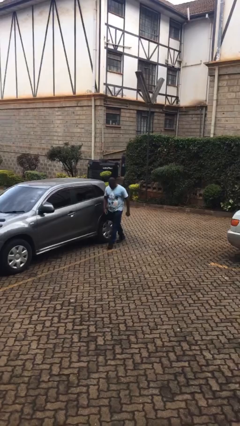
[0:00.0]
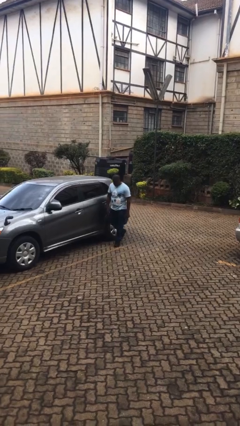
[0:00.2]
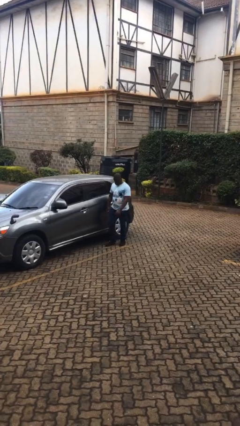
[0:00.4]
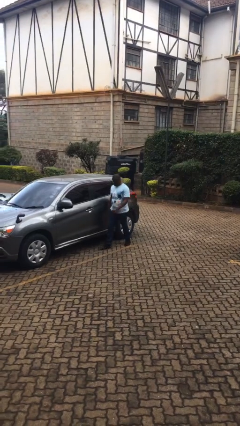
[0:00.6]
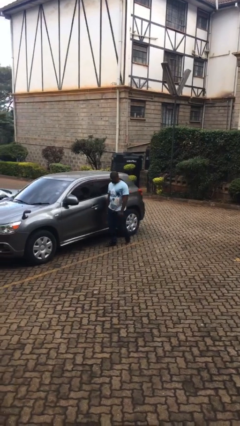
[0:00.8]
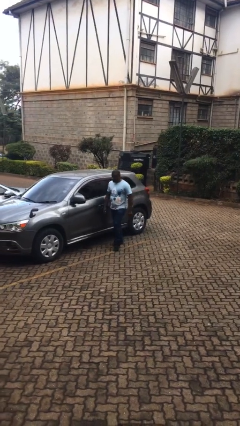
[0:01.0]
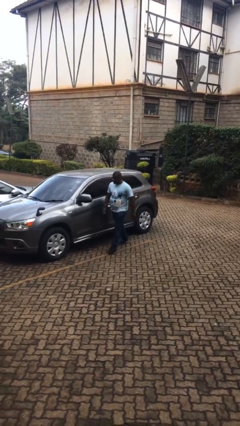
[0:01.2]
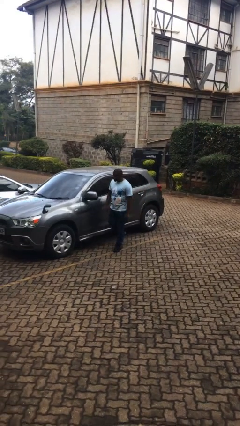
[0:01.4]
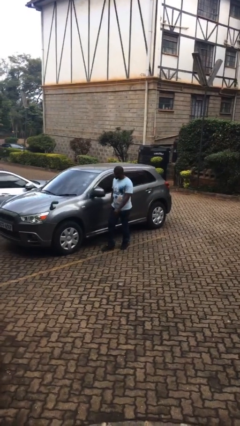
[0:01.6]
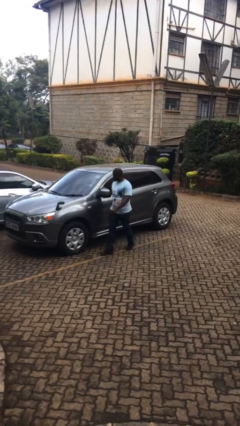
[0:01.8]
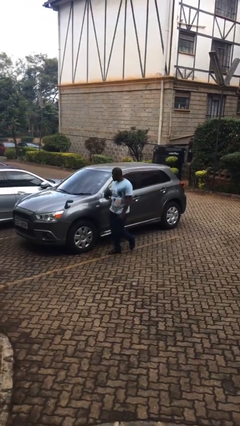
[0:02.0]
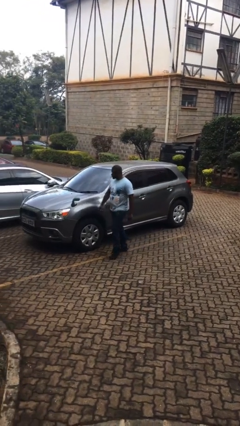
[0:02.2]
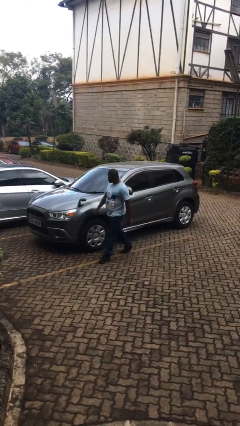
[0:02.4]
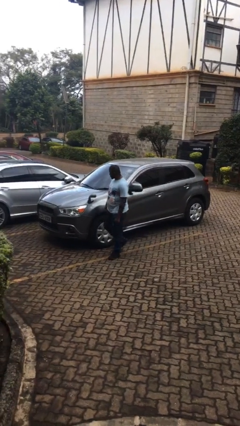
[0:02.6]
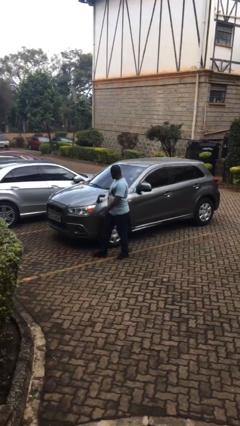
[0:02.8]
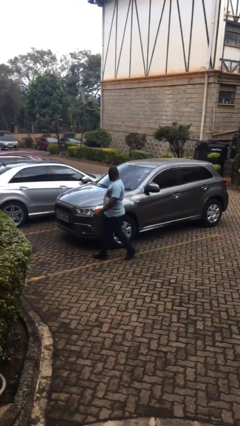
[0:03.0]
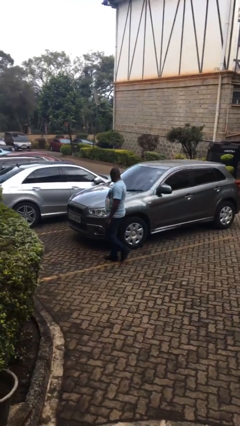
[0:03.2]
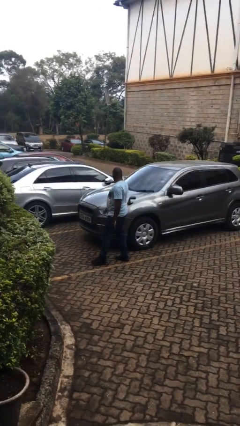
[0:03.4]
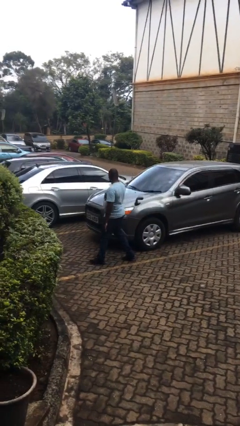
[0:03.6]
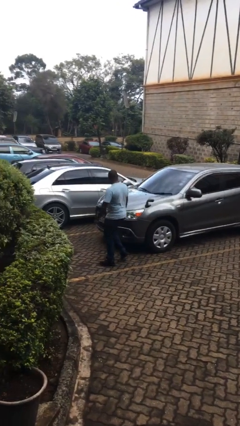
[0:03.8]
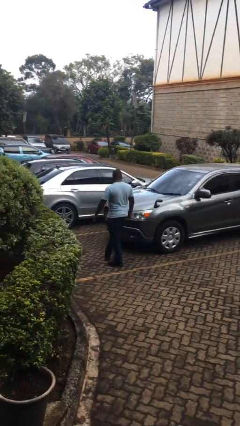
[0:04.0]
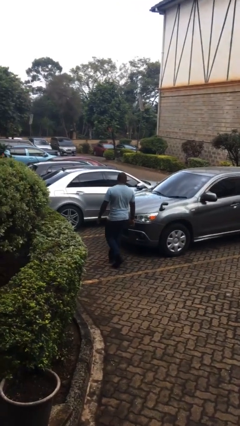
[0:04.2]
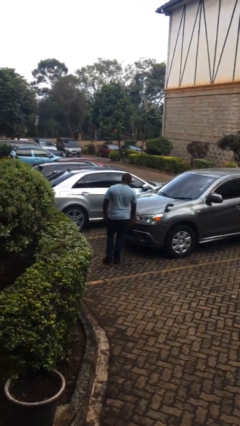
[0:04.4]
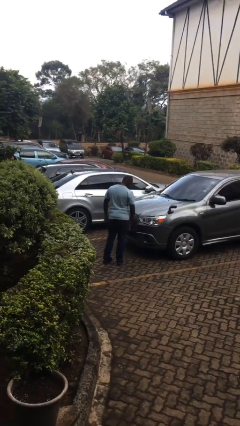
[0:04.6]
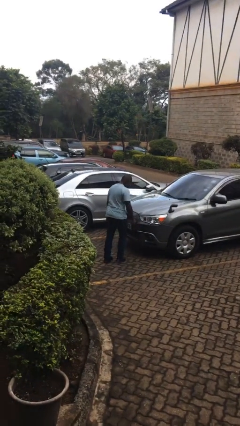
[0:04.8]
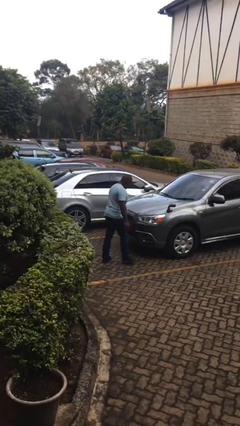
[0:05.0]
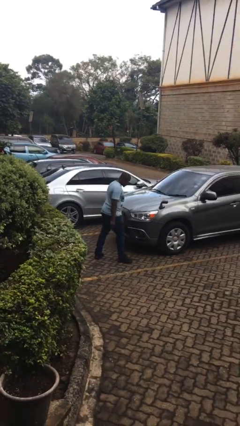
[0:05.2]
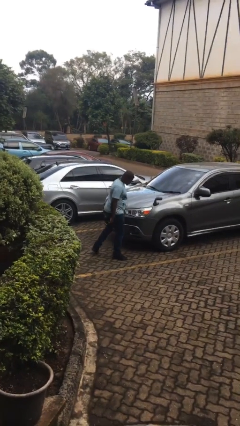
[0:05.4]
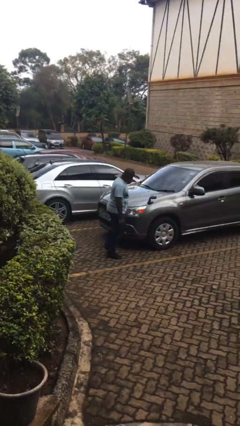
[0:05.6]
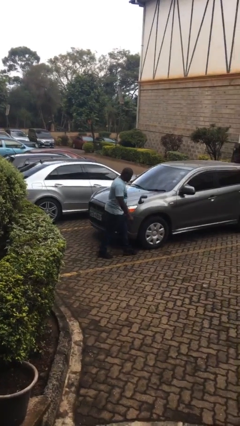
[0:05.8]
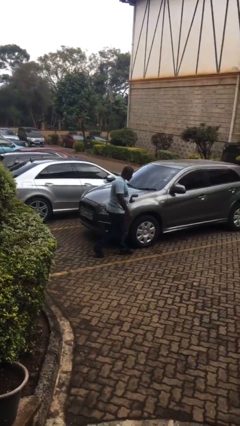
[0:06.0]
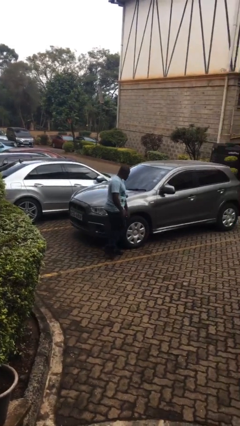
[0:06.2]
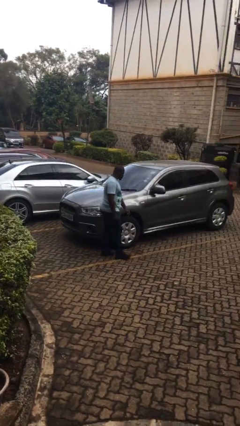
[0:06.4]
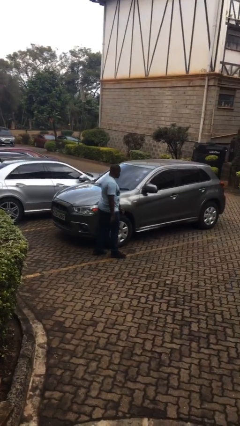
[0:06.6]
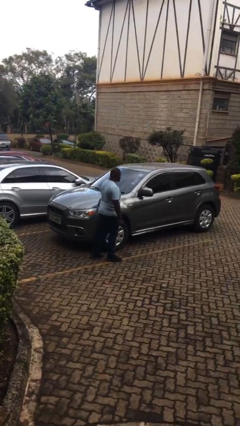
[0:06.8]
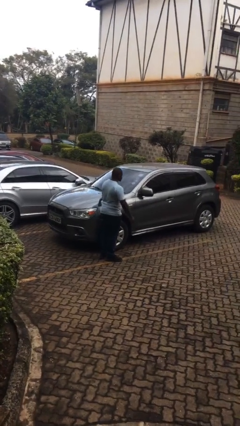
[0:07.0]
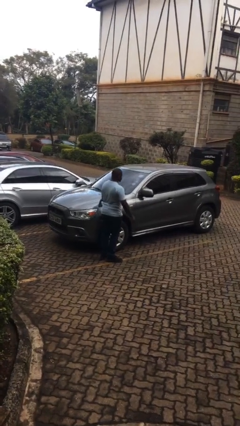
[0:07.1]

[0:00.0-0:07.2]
person walks around car

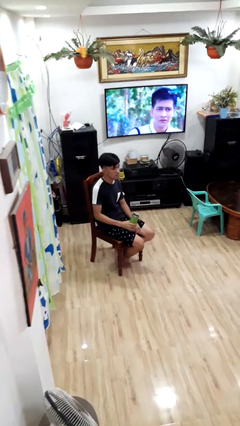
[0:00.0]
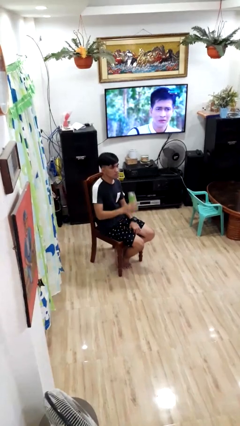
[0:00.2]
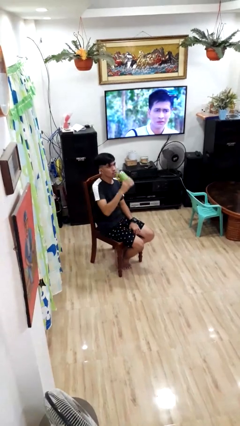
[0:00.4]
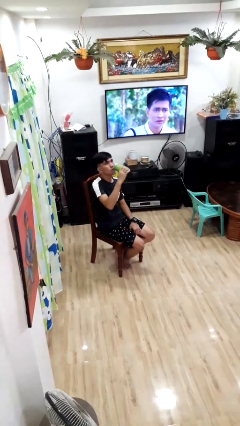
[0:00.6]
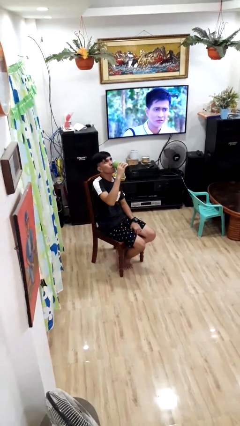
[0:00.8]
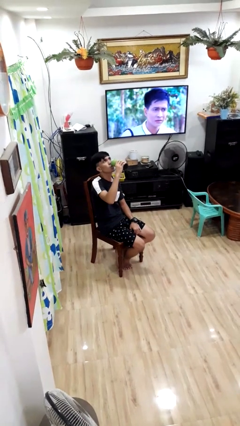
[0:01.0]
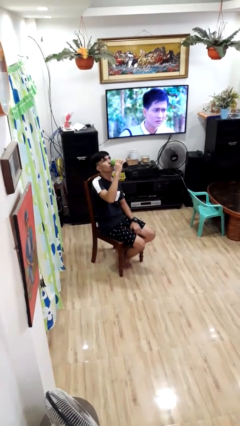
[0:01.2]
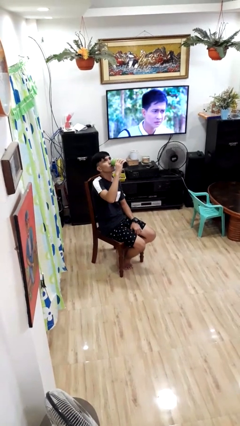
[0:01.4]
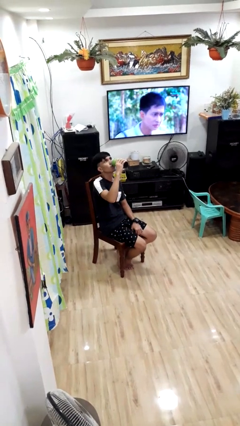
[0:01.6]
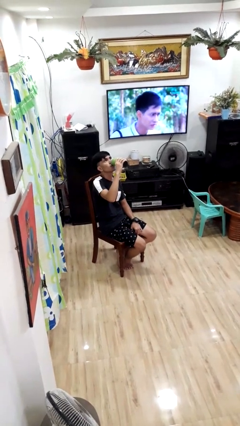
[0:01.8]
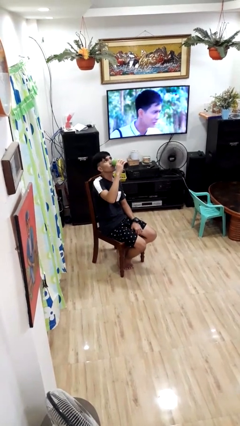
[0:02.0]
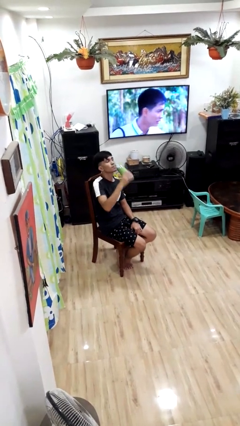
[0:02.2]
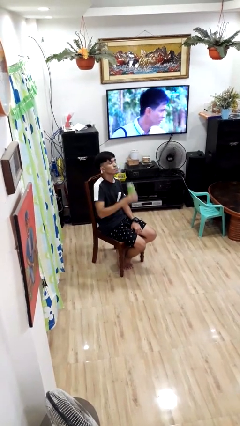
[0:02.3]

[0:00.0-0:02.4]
person drinks from bottle

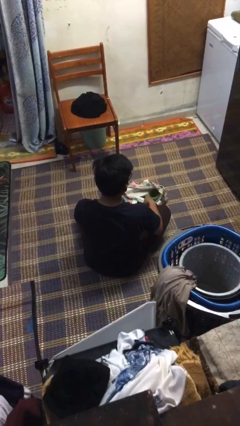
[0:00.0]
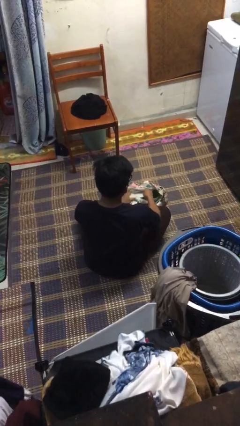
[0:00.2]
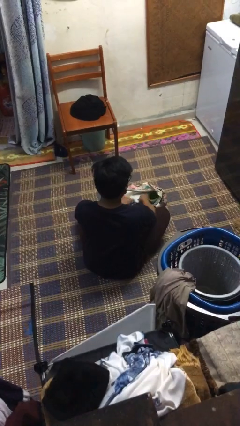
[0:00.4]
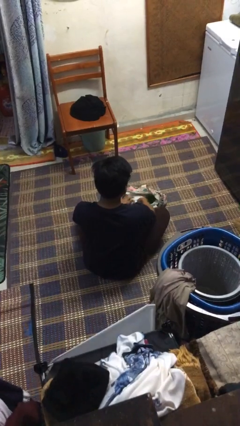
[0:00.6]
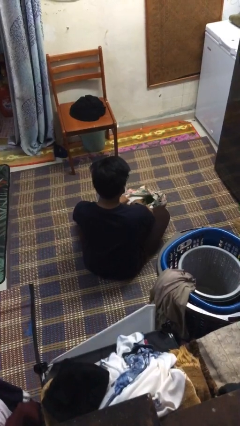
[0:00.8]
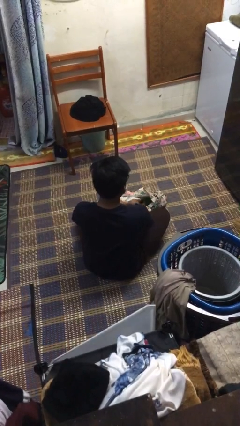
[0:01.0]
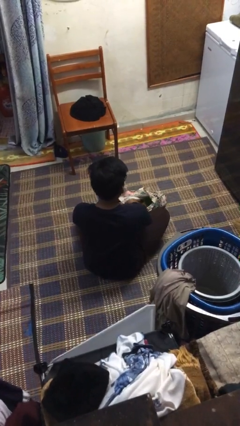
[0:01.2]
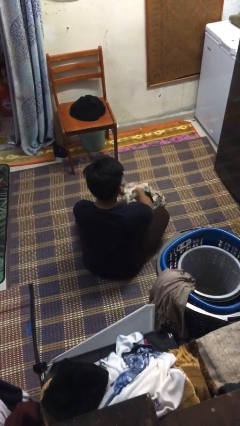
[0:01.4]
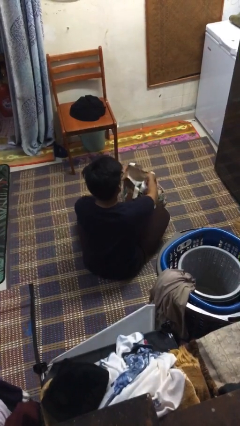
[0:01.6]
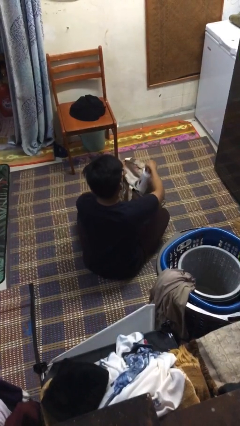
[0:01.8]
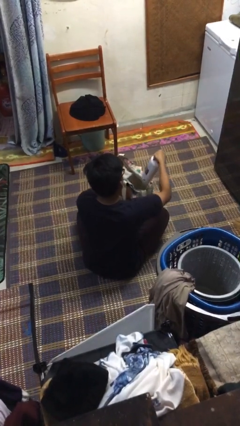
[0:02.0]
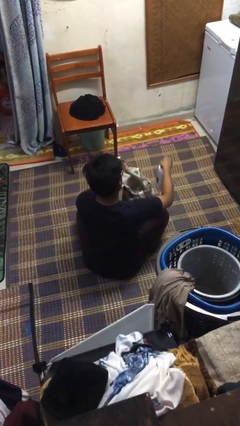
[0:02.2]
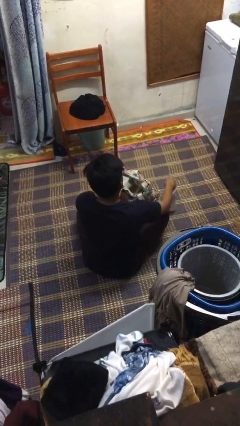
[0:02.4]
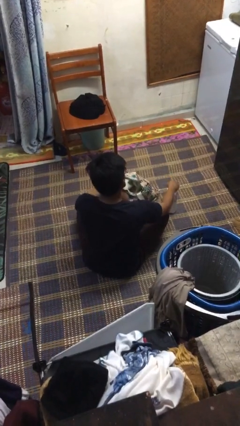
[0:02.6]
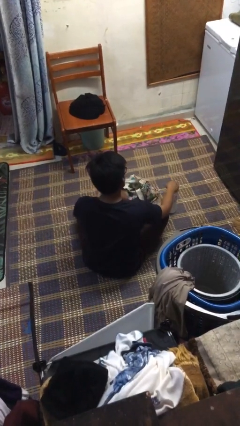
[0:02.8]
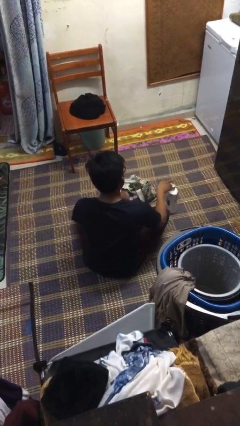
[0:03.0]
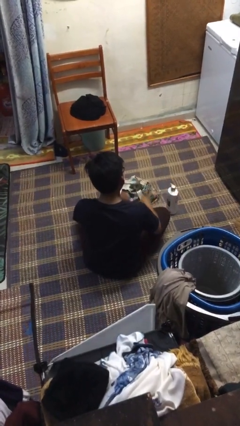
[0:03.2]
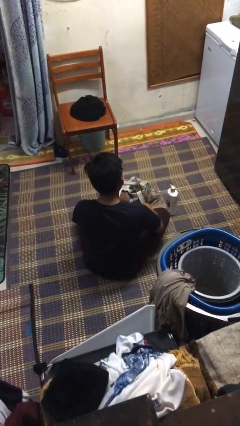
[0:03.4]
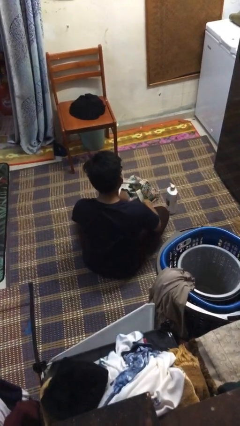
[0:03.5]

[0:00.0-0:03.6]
person takes object from bag

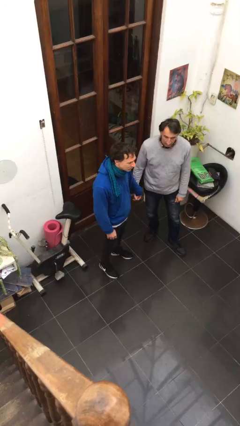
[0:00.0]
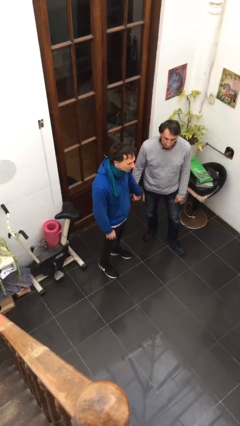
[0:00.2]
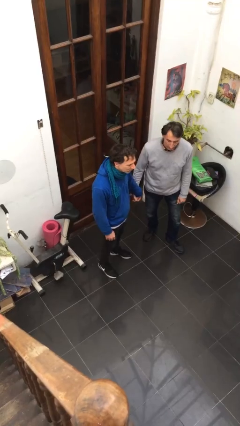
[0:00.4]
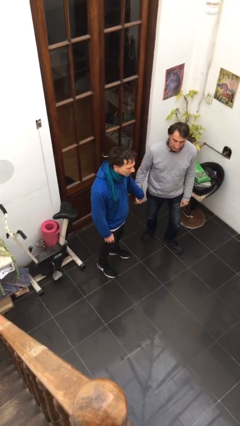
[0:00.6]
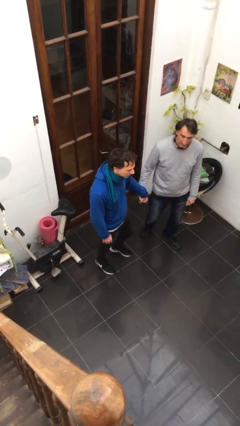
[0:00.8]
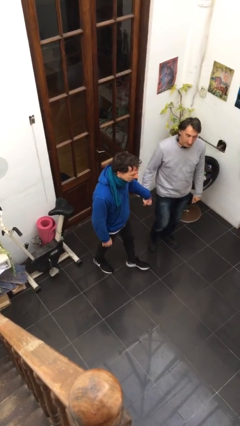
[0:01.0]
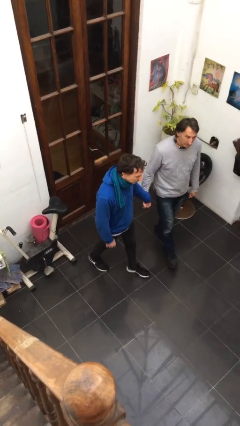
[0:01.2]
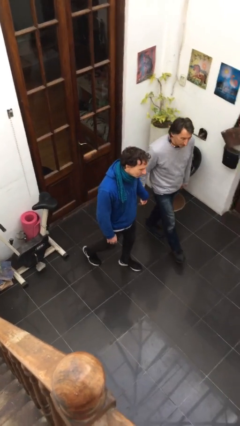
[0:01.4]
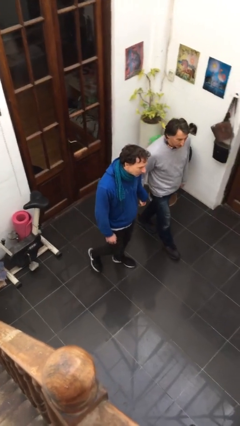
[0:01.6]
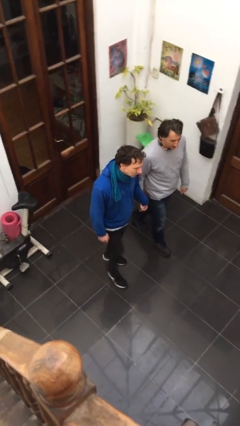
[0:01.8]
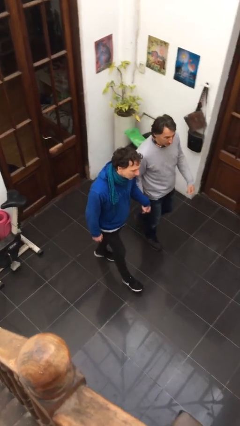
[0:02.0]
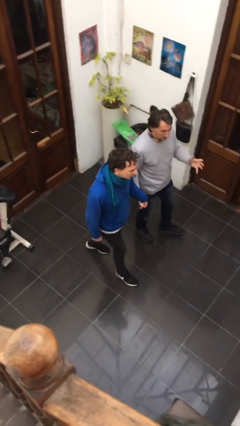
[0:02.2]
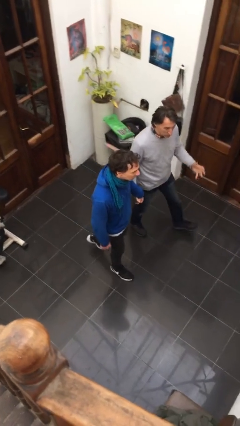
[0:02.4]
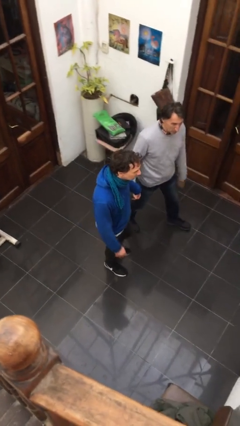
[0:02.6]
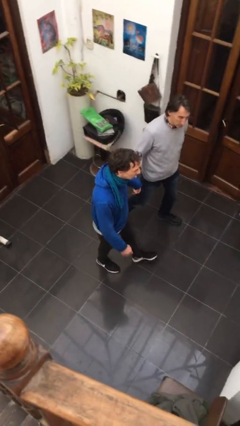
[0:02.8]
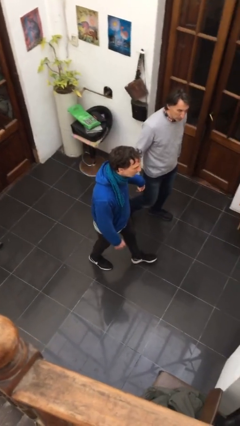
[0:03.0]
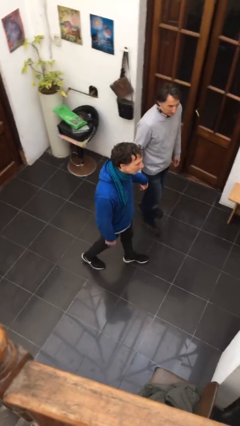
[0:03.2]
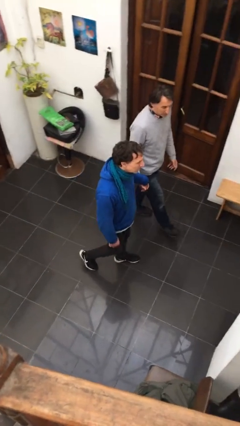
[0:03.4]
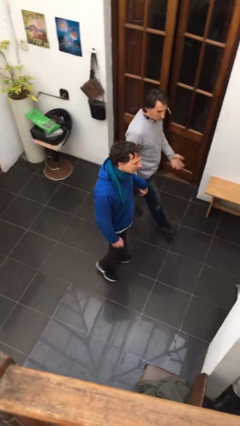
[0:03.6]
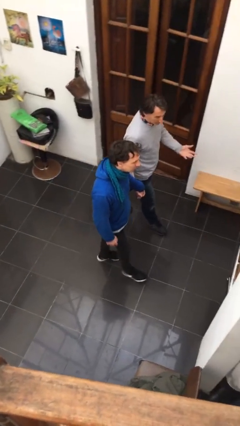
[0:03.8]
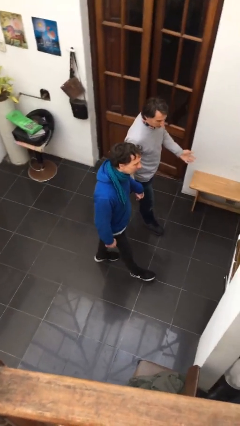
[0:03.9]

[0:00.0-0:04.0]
person holds hand

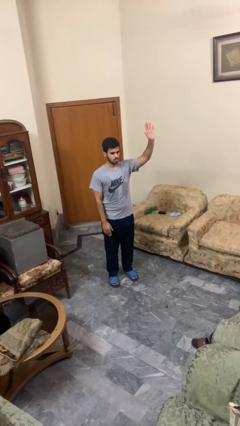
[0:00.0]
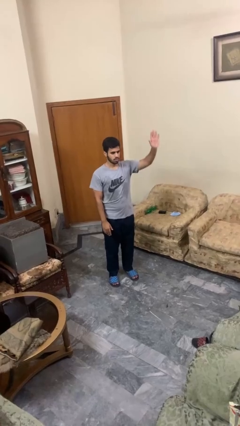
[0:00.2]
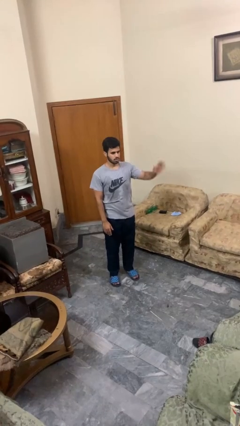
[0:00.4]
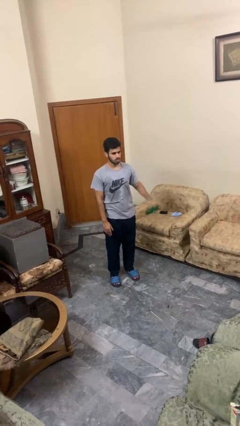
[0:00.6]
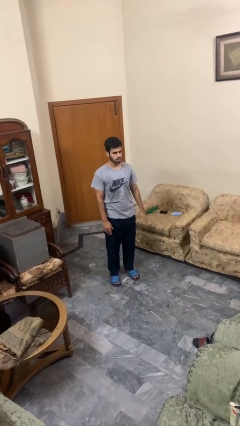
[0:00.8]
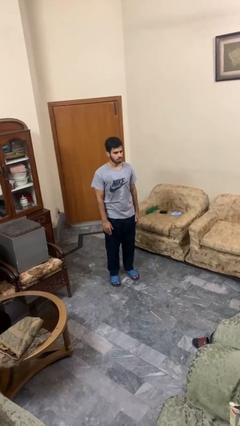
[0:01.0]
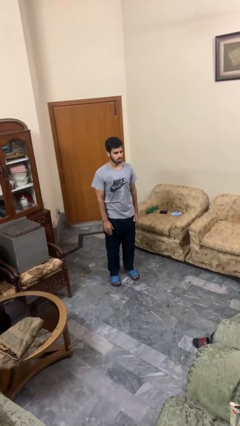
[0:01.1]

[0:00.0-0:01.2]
person gestures lower hand
